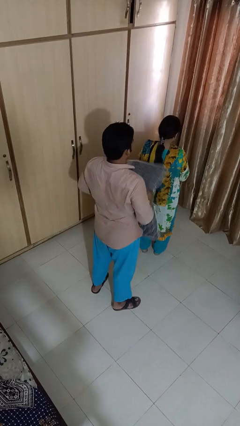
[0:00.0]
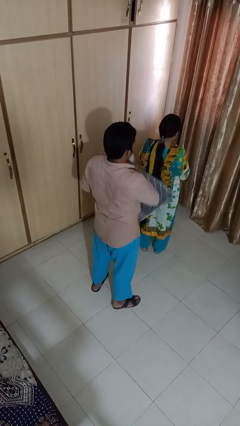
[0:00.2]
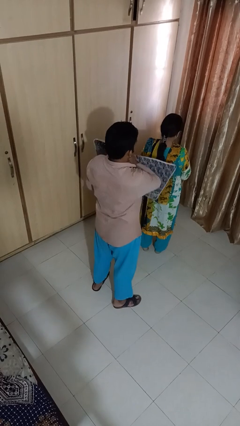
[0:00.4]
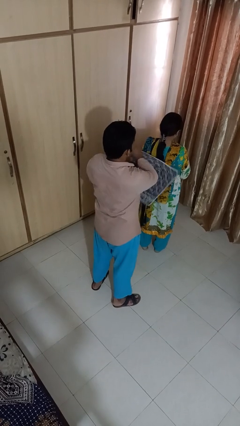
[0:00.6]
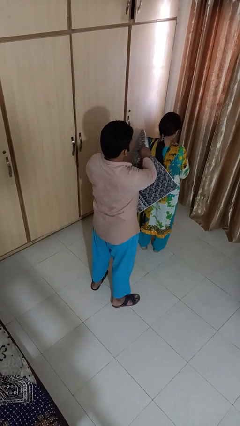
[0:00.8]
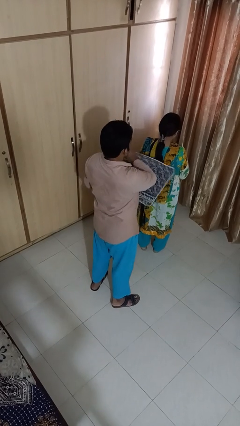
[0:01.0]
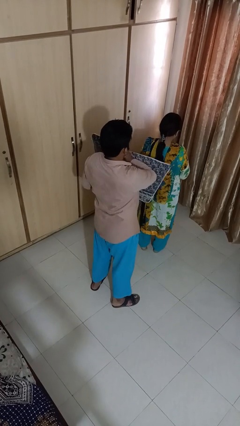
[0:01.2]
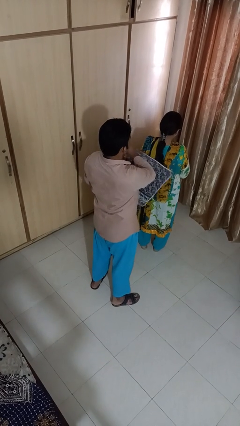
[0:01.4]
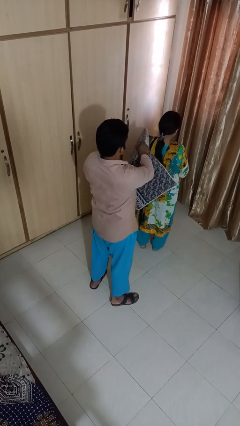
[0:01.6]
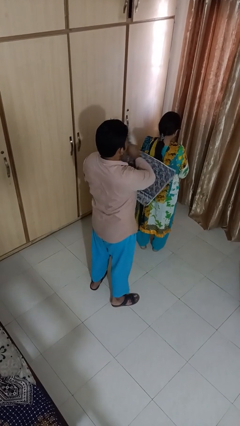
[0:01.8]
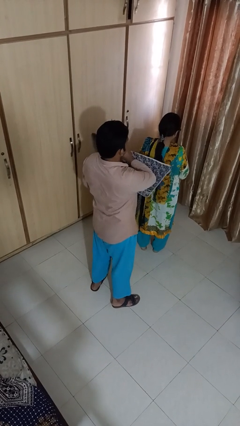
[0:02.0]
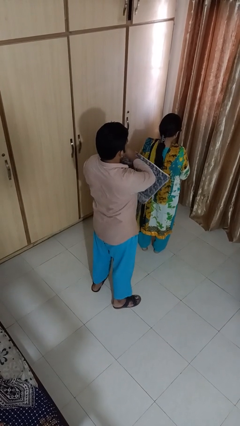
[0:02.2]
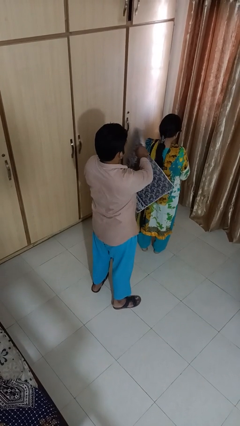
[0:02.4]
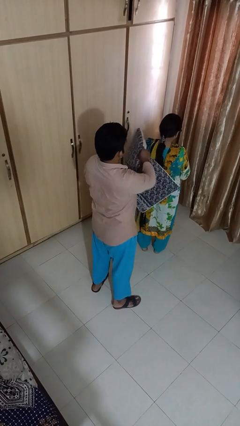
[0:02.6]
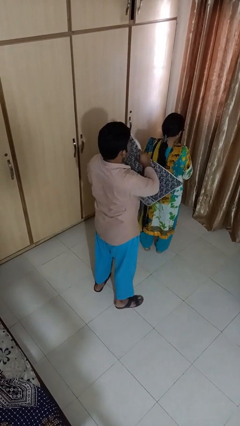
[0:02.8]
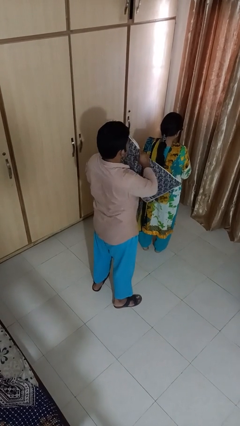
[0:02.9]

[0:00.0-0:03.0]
person hits person with pillow

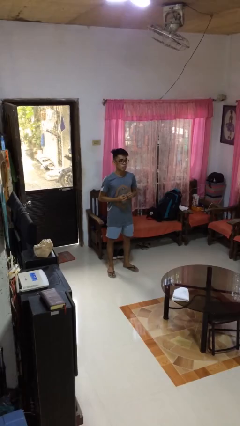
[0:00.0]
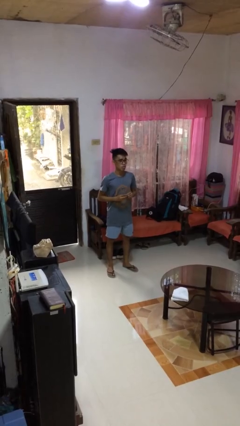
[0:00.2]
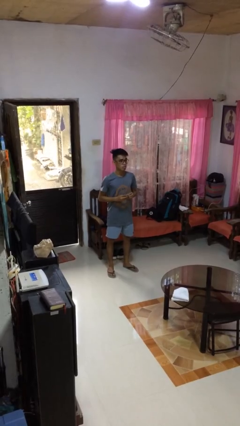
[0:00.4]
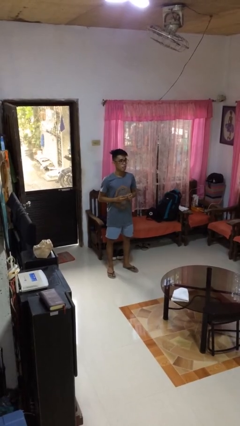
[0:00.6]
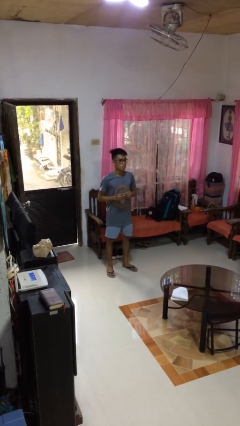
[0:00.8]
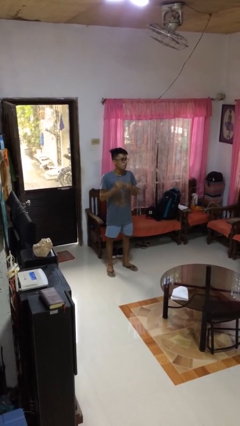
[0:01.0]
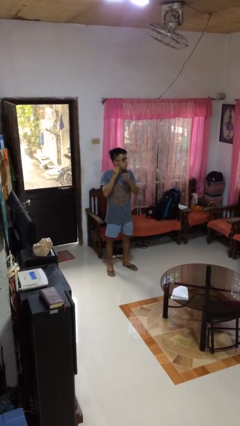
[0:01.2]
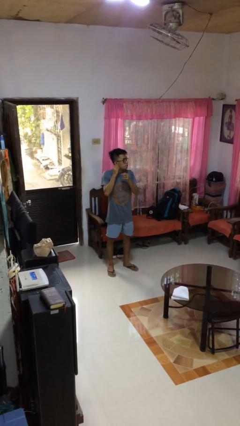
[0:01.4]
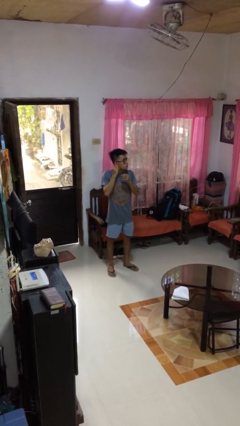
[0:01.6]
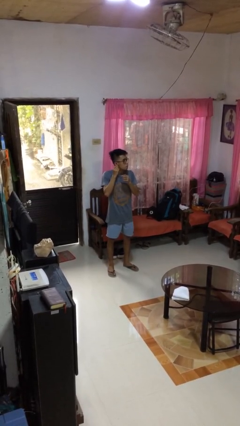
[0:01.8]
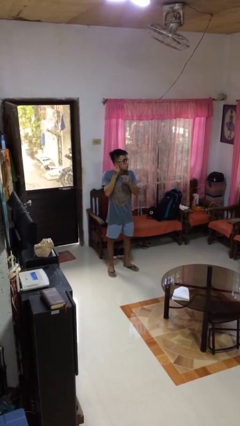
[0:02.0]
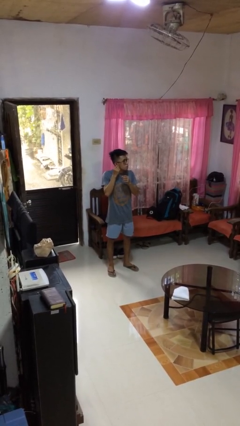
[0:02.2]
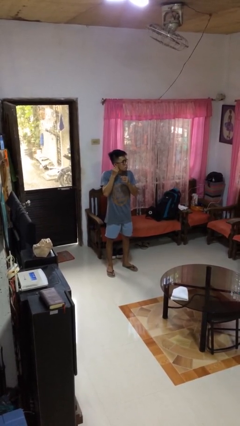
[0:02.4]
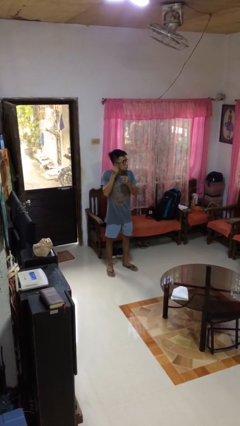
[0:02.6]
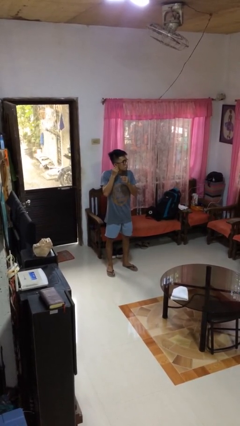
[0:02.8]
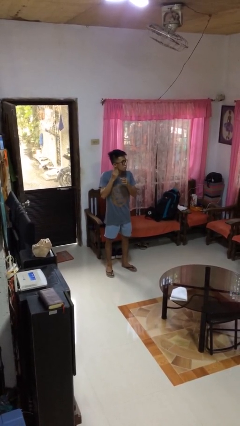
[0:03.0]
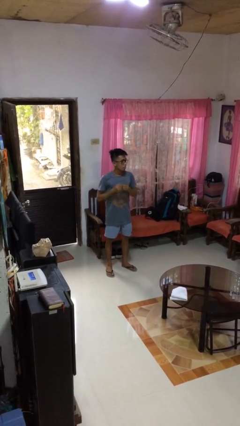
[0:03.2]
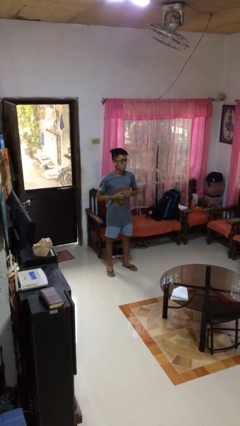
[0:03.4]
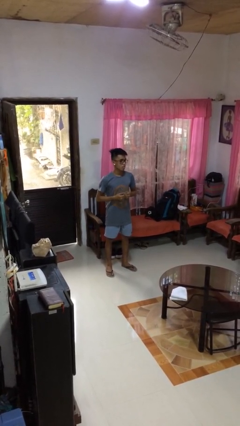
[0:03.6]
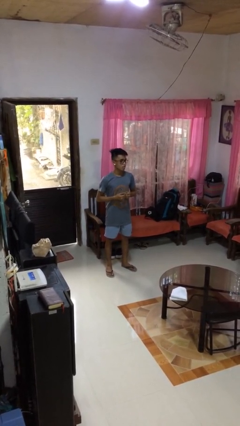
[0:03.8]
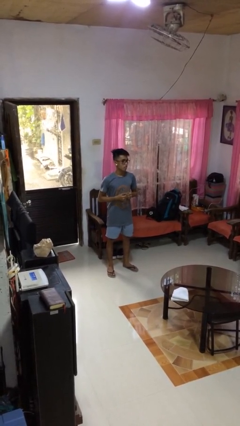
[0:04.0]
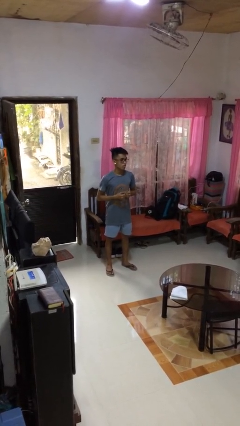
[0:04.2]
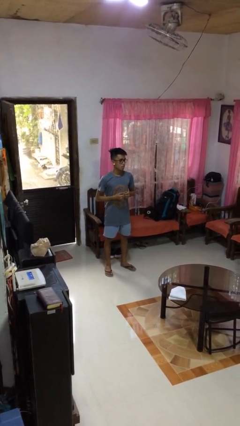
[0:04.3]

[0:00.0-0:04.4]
person puts on earrings

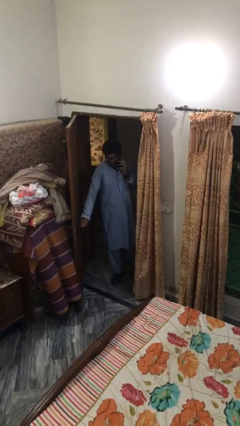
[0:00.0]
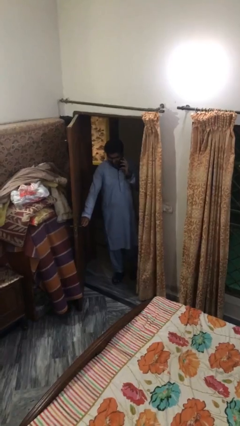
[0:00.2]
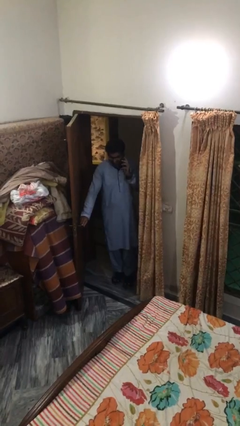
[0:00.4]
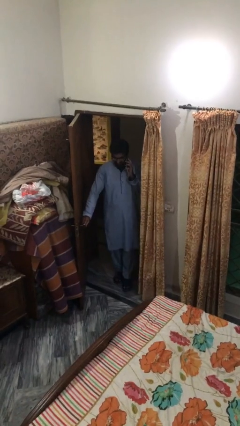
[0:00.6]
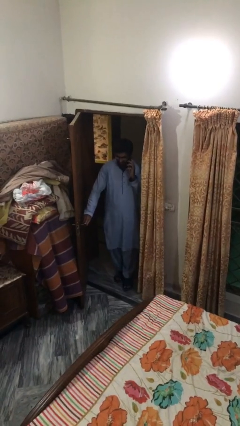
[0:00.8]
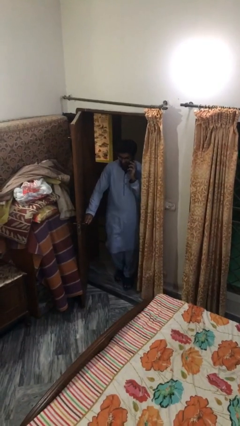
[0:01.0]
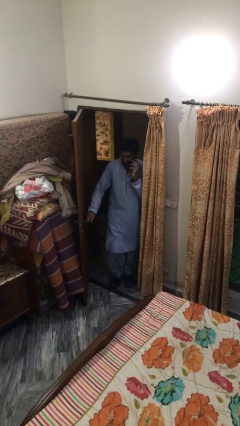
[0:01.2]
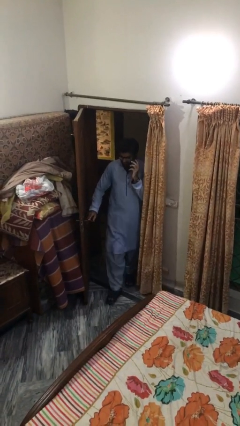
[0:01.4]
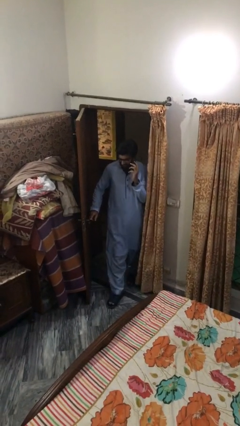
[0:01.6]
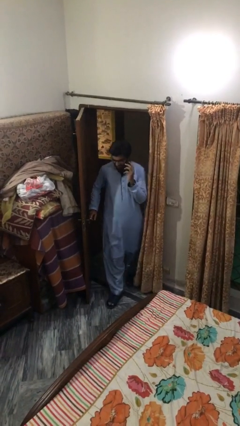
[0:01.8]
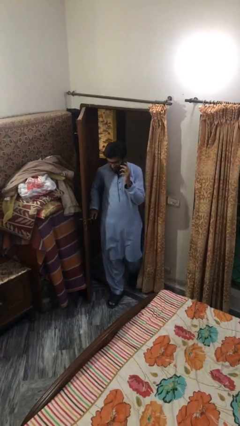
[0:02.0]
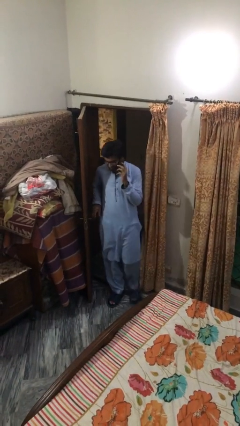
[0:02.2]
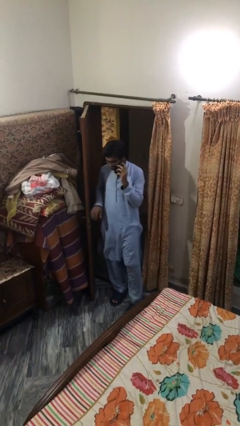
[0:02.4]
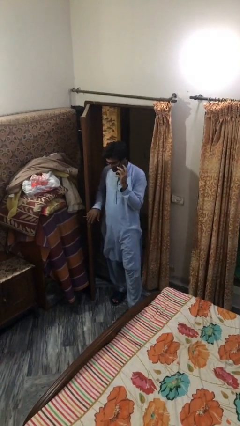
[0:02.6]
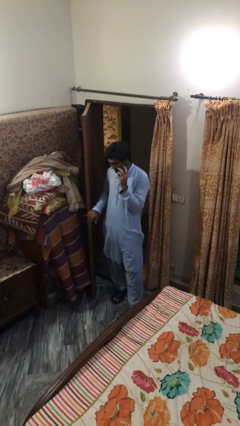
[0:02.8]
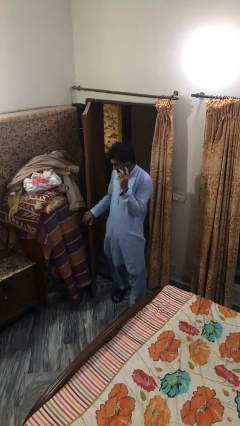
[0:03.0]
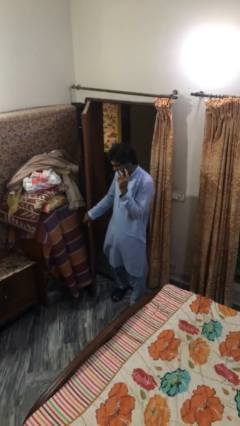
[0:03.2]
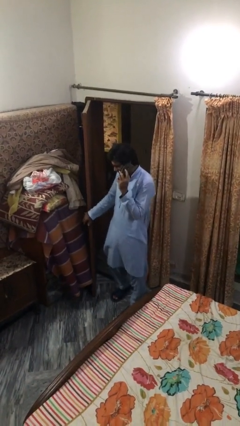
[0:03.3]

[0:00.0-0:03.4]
person enters scene through structure

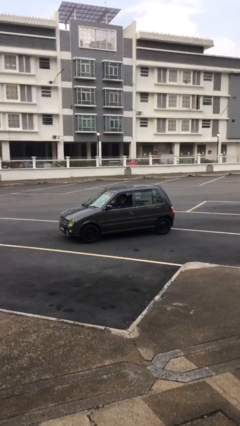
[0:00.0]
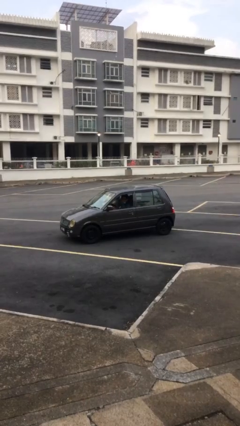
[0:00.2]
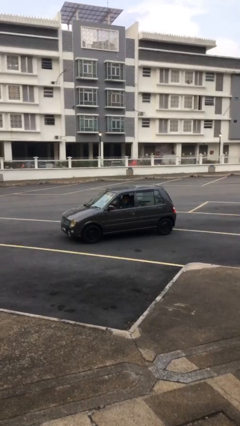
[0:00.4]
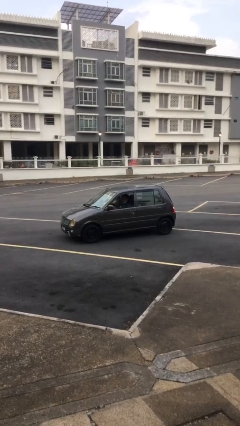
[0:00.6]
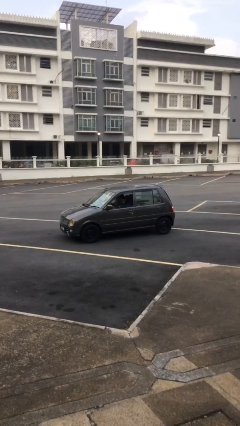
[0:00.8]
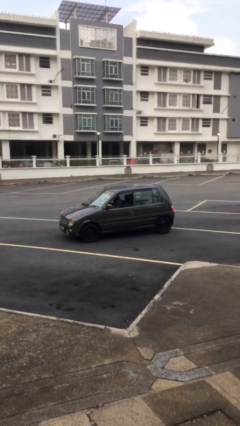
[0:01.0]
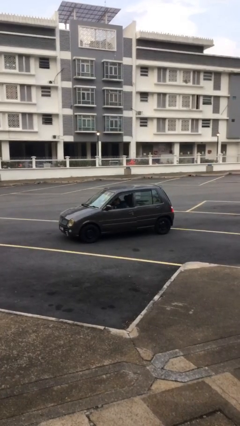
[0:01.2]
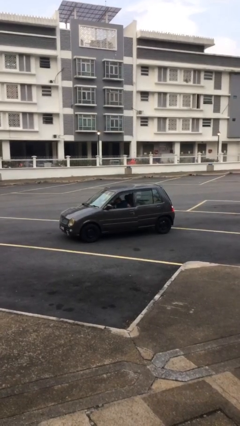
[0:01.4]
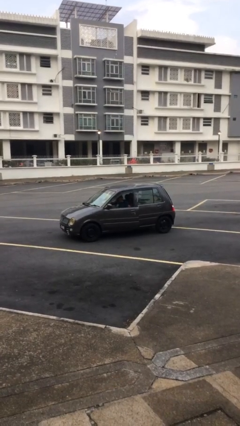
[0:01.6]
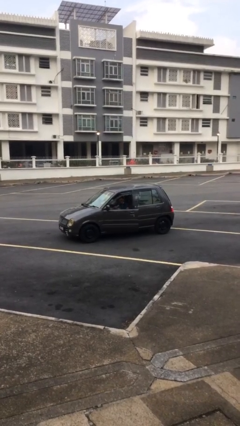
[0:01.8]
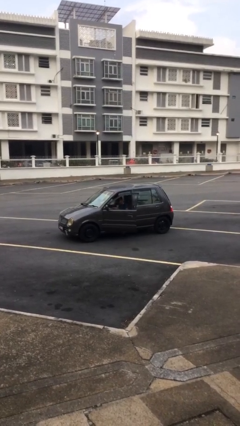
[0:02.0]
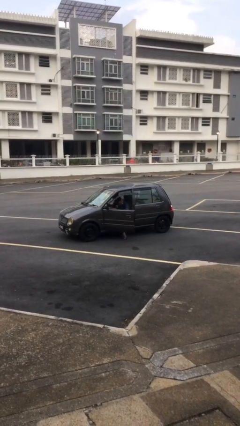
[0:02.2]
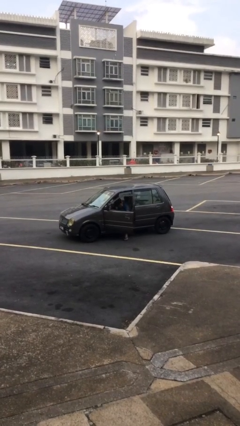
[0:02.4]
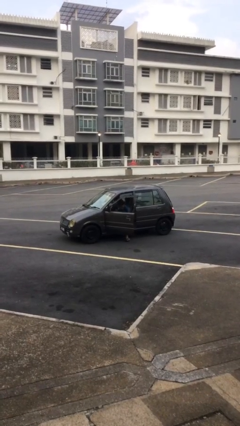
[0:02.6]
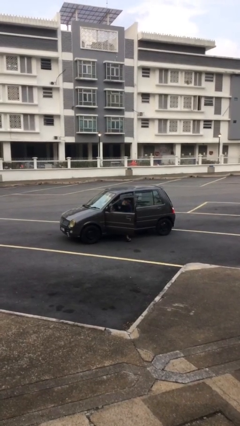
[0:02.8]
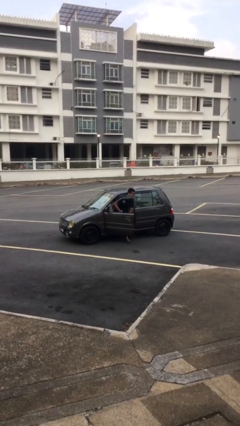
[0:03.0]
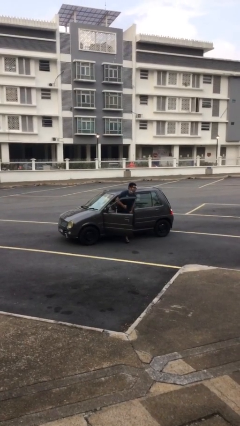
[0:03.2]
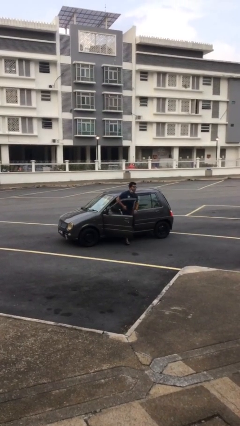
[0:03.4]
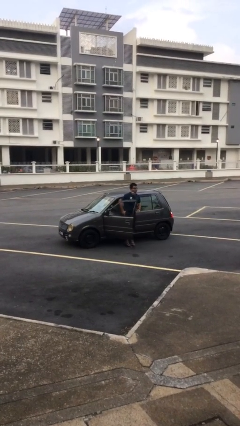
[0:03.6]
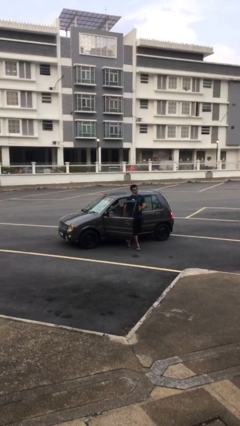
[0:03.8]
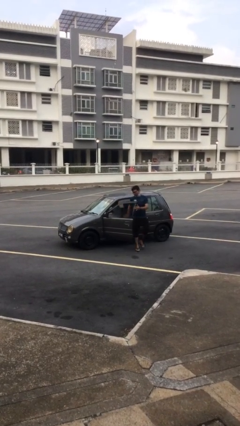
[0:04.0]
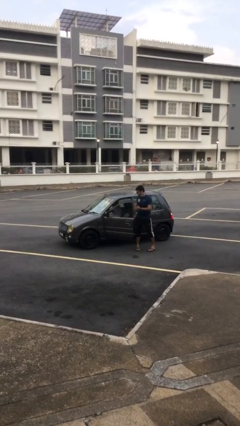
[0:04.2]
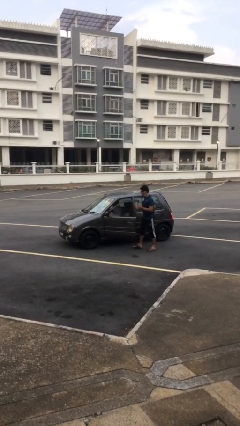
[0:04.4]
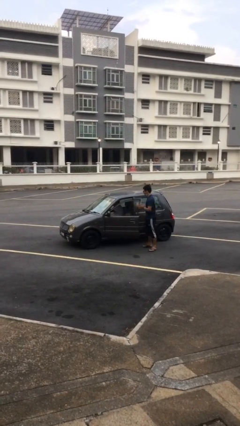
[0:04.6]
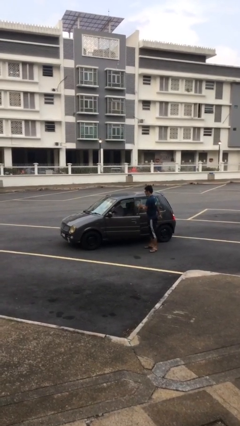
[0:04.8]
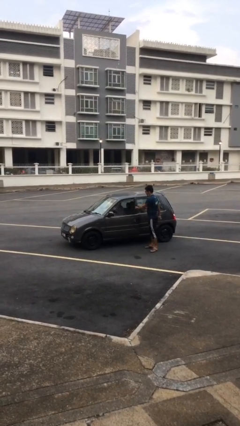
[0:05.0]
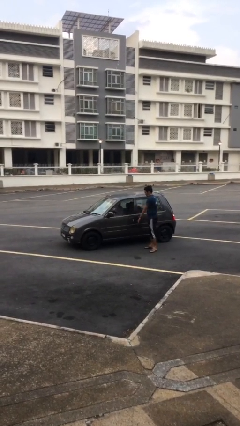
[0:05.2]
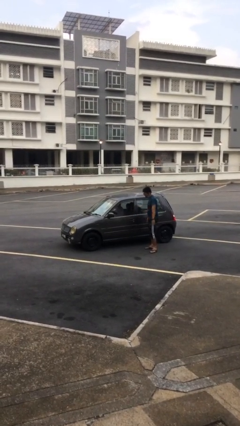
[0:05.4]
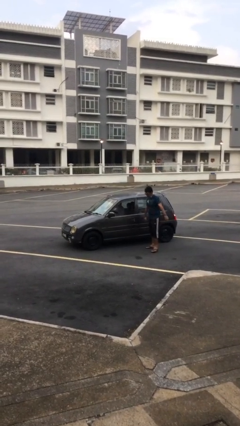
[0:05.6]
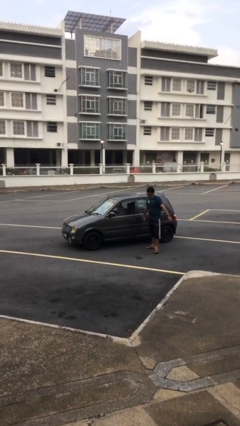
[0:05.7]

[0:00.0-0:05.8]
car drops off person

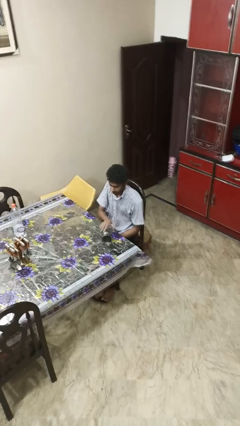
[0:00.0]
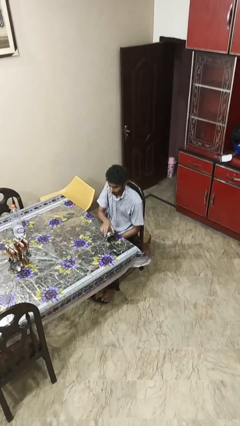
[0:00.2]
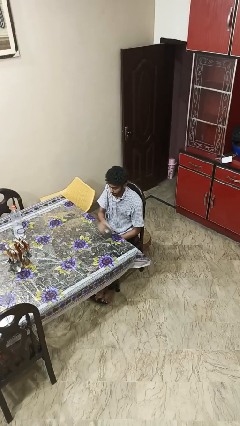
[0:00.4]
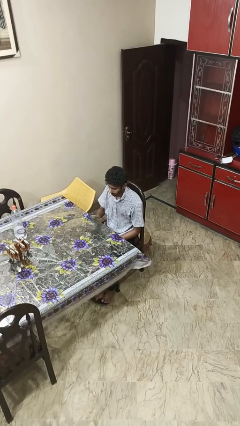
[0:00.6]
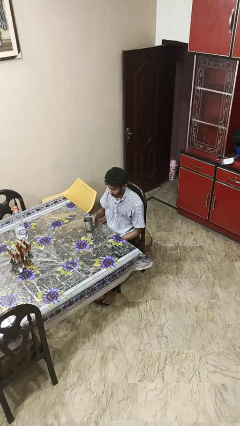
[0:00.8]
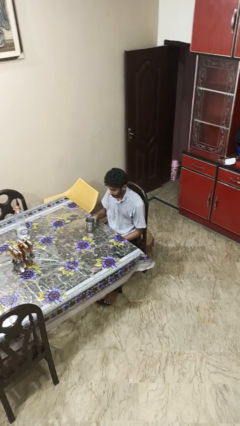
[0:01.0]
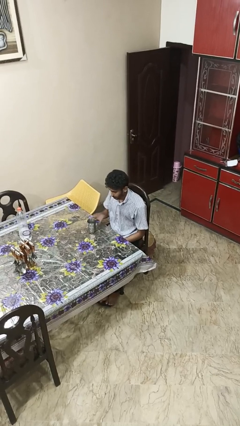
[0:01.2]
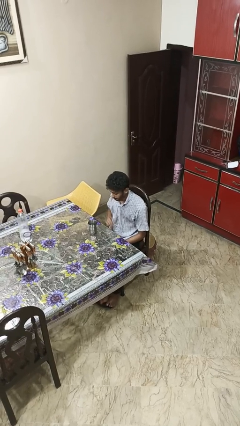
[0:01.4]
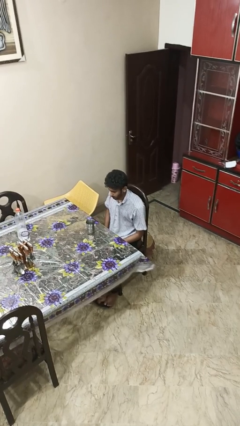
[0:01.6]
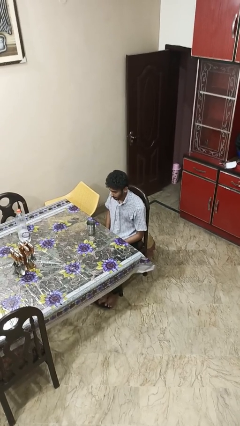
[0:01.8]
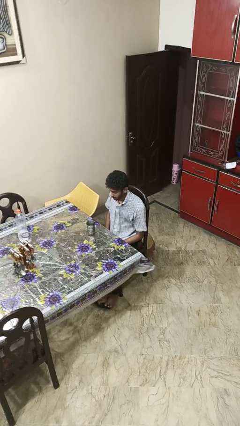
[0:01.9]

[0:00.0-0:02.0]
person sets upright glass
